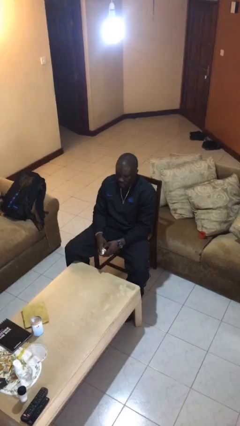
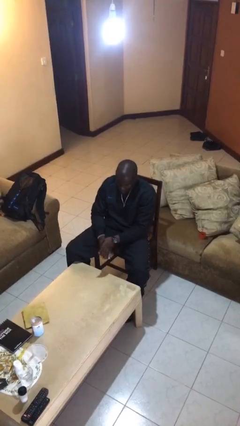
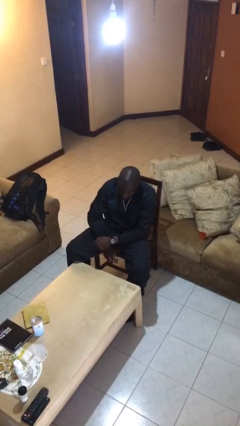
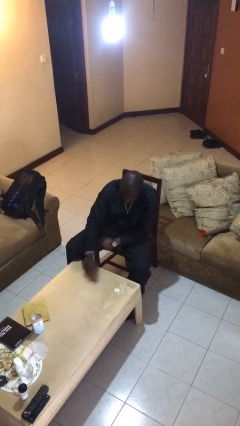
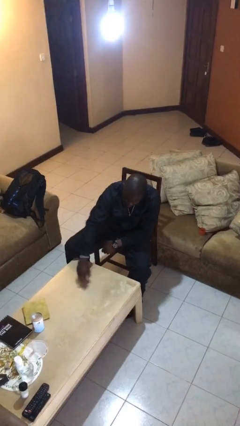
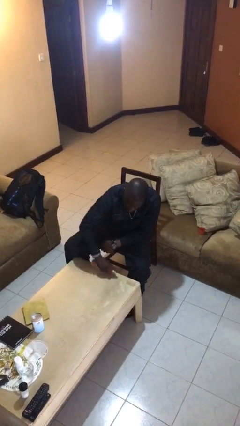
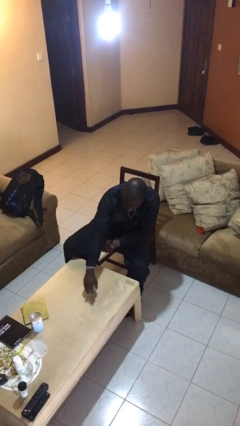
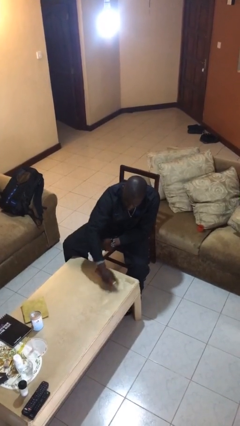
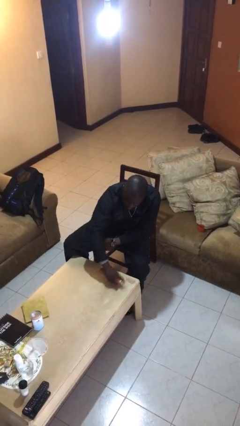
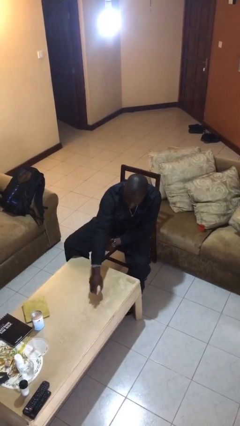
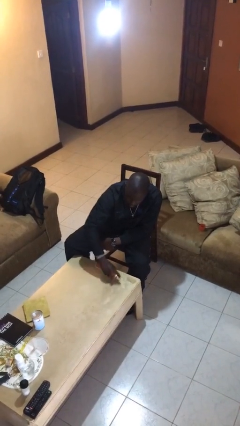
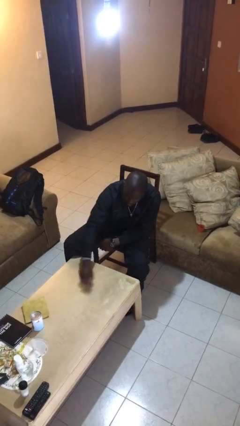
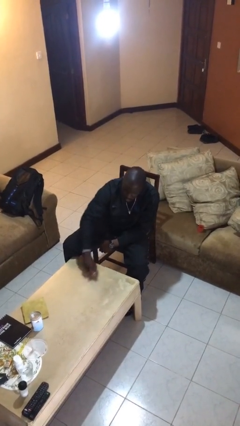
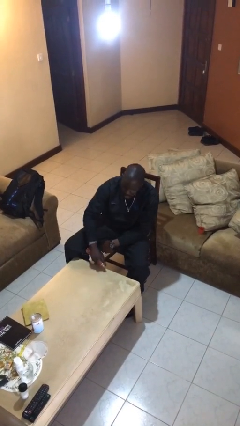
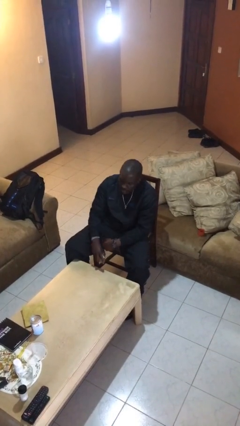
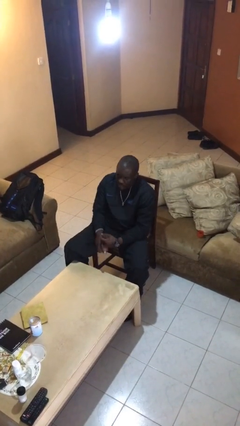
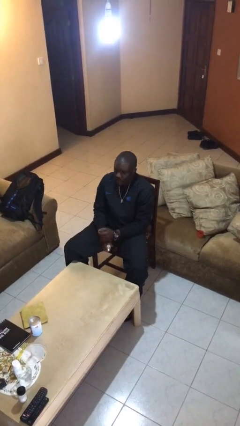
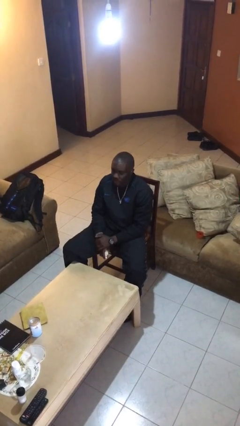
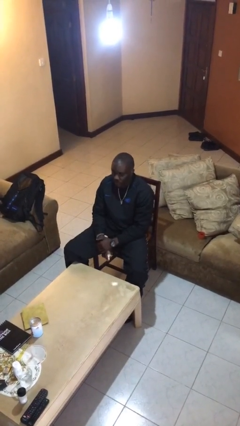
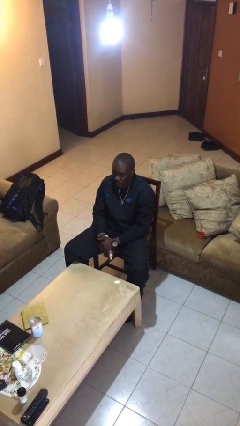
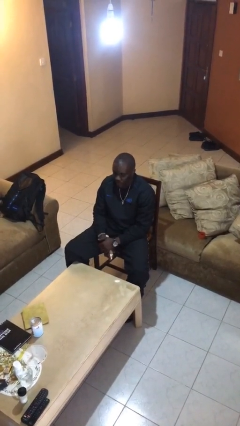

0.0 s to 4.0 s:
person sprays from bottle

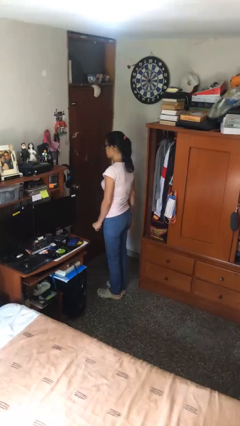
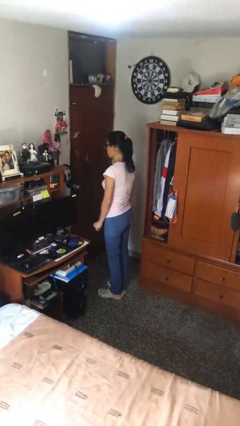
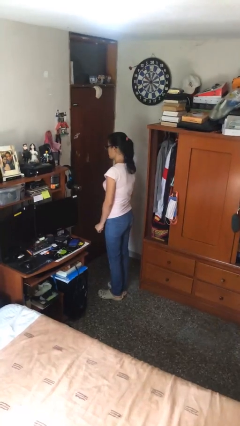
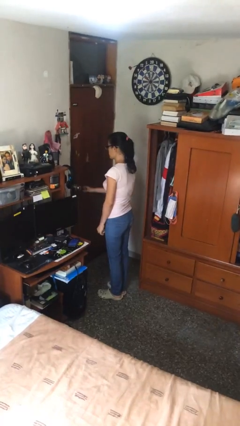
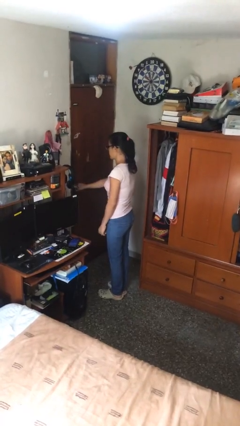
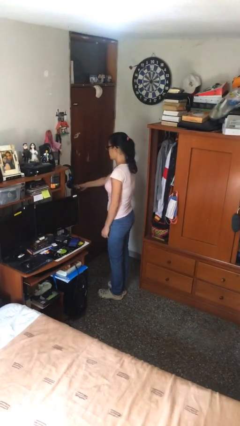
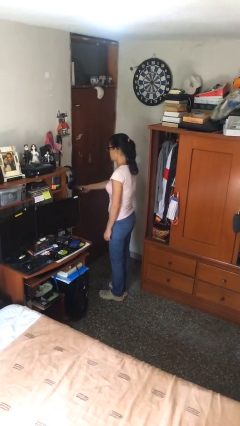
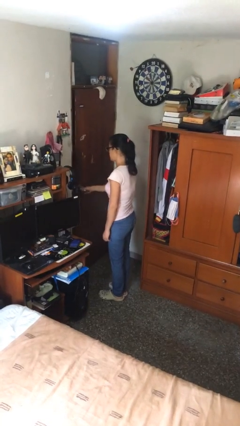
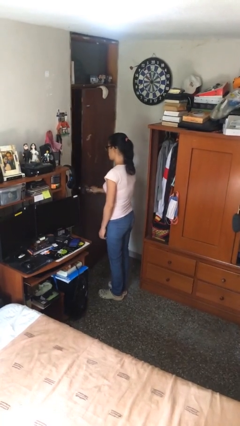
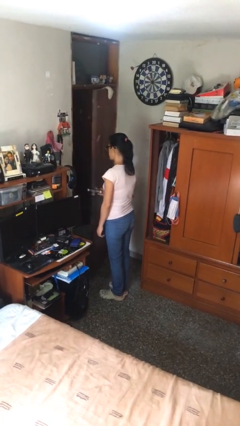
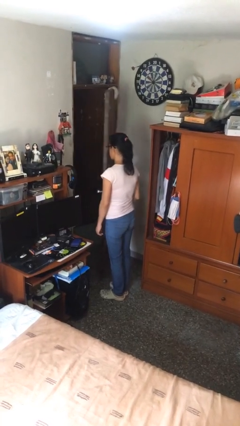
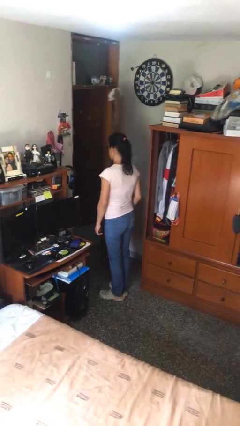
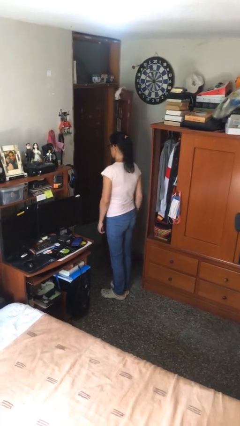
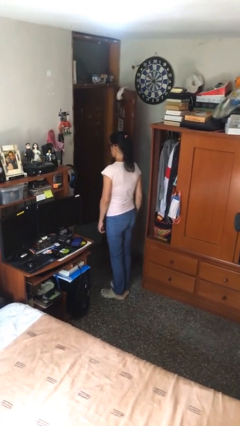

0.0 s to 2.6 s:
person opens facility door

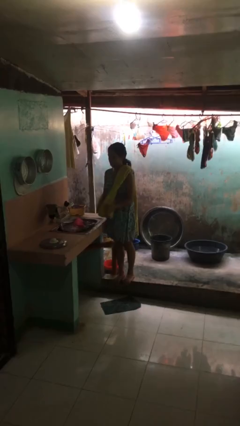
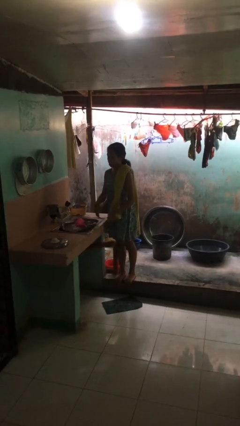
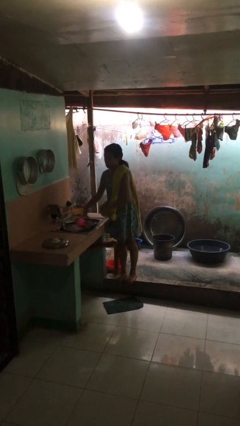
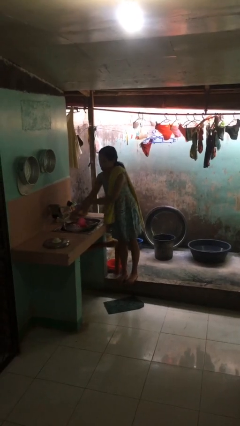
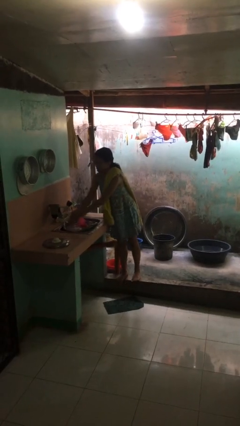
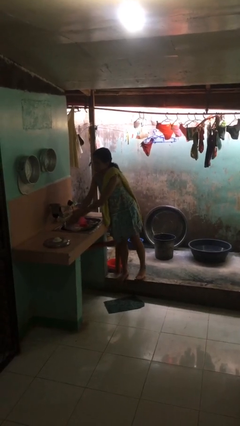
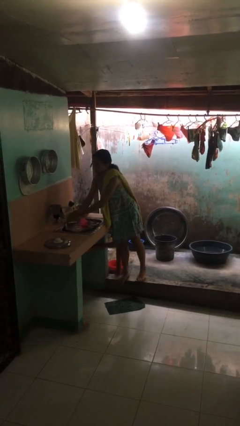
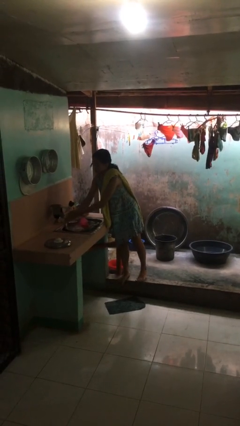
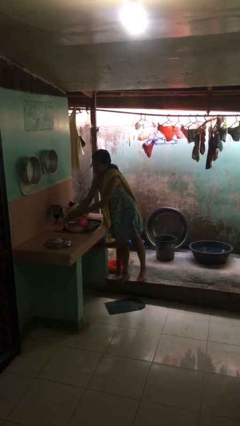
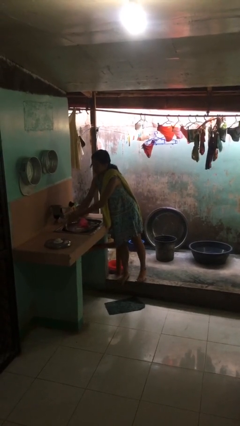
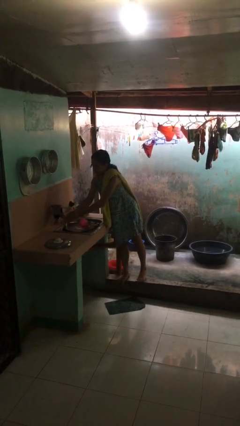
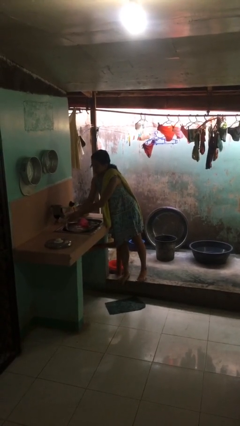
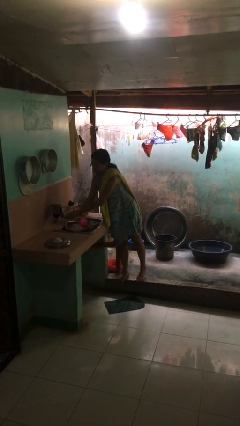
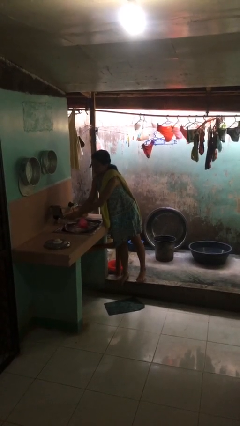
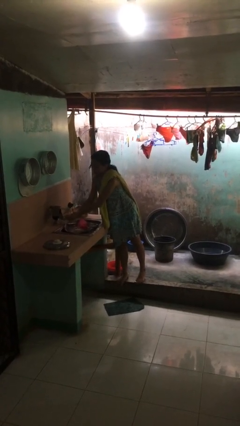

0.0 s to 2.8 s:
person washes hands

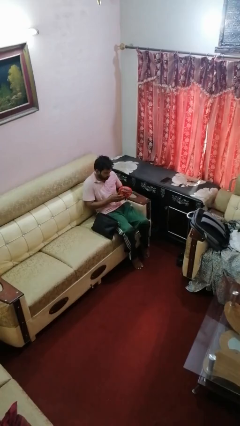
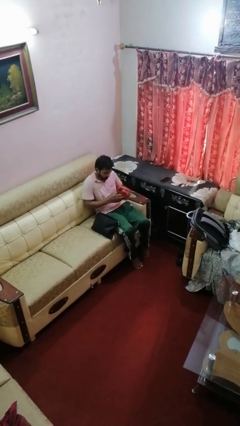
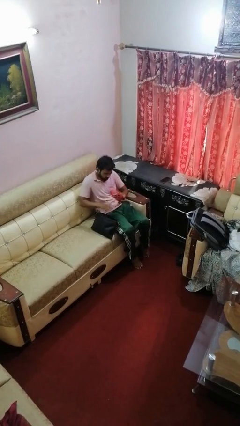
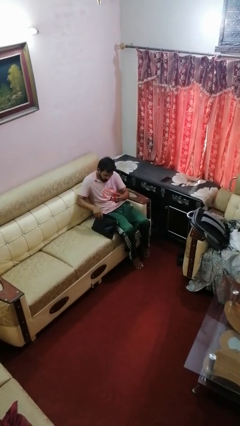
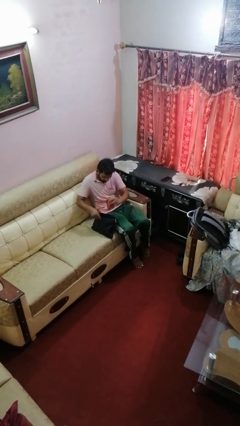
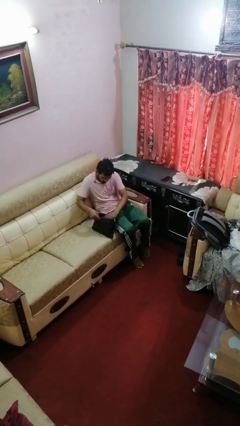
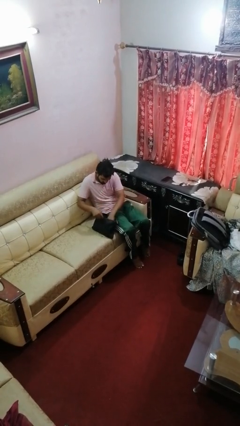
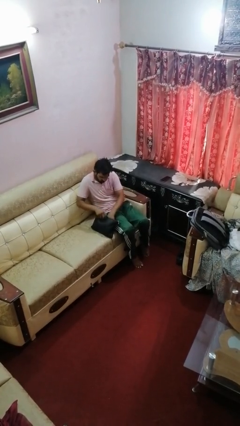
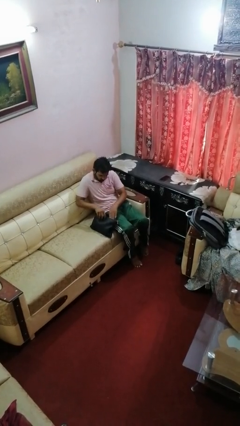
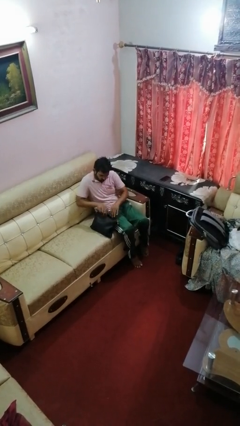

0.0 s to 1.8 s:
person puts object into purse

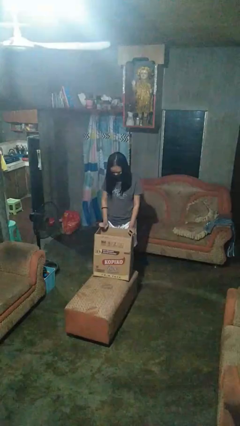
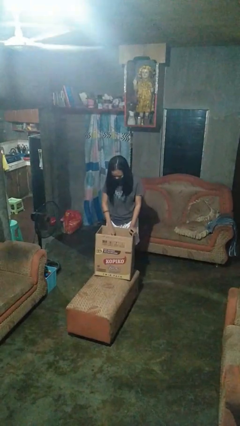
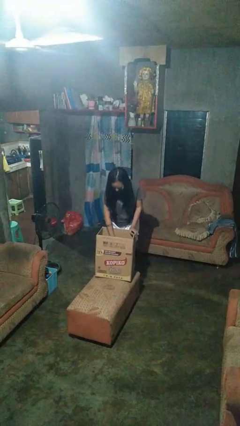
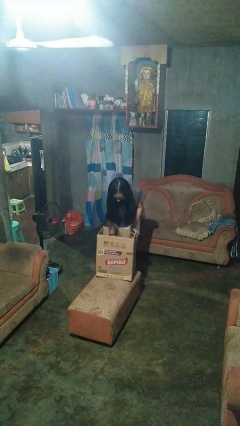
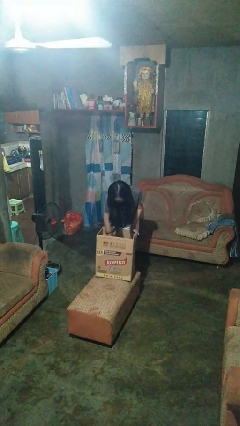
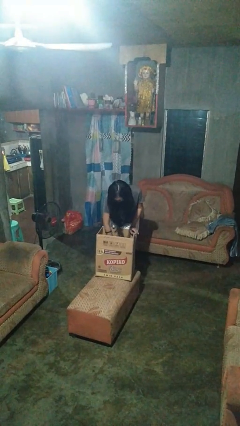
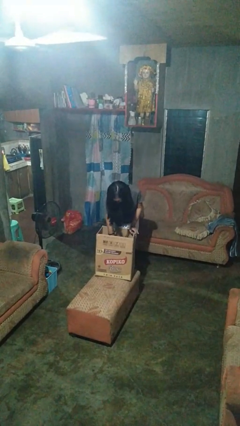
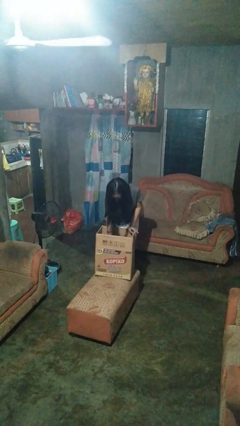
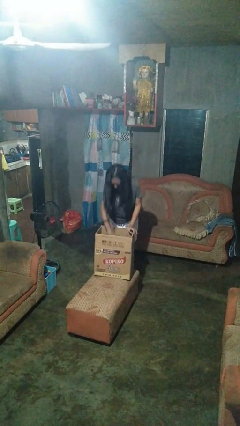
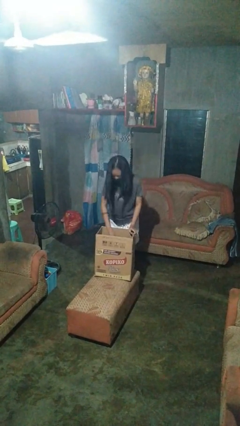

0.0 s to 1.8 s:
person searches in box

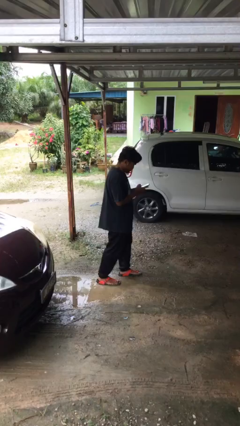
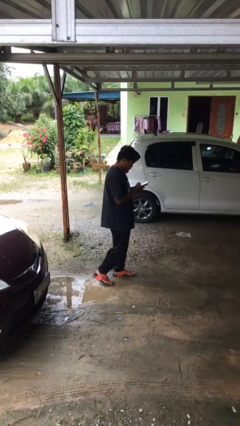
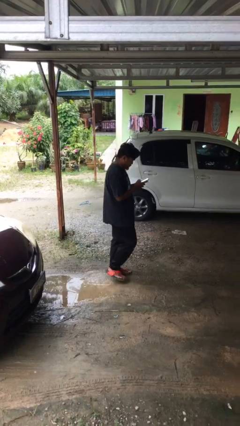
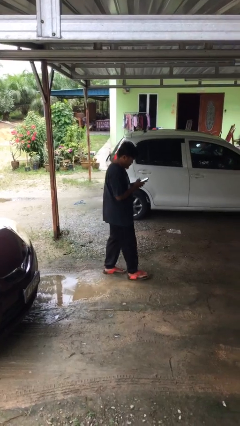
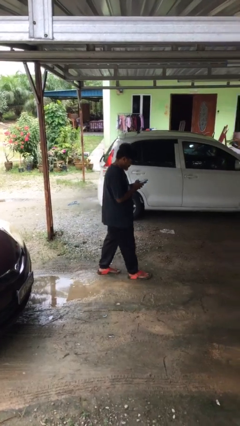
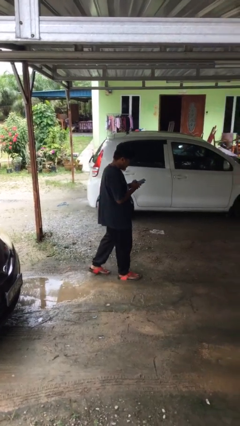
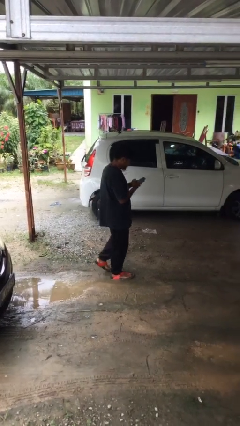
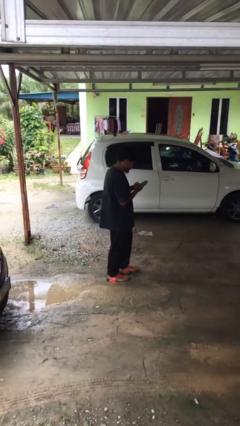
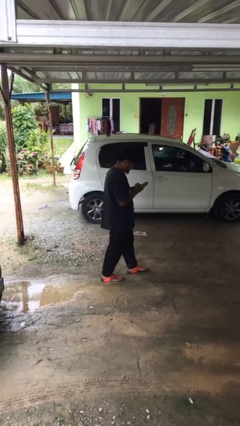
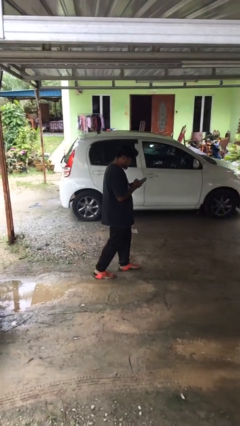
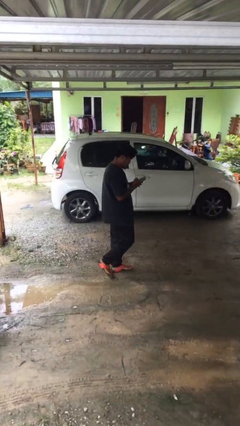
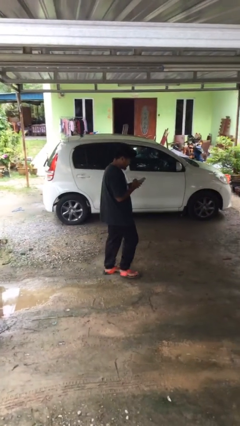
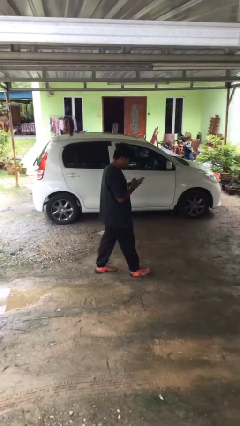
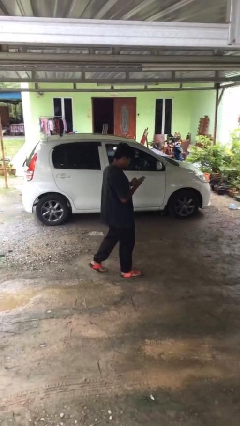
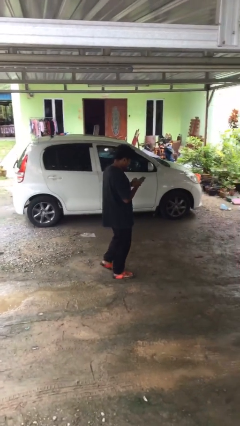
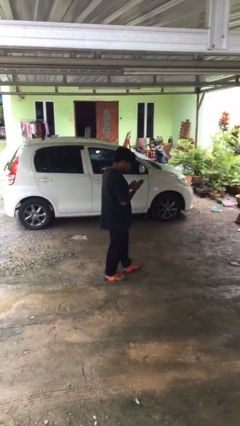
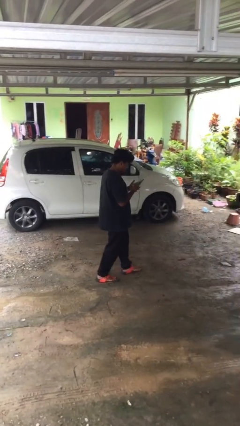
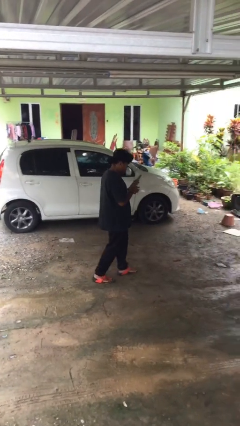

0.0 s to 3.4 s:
person texts on phone

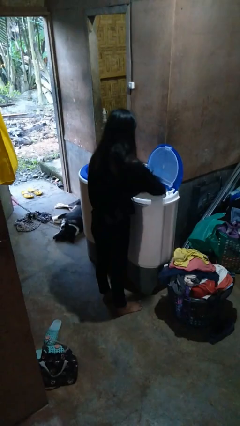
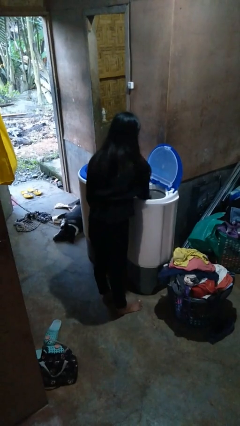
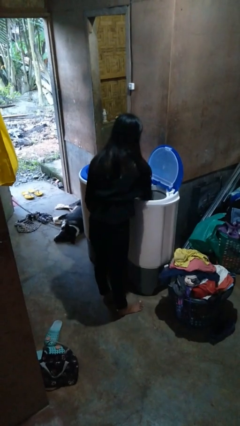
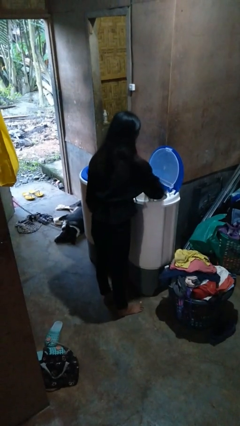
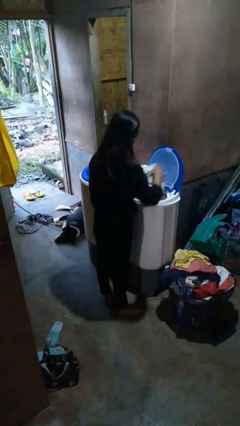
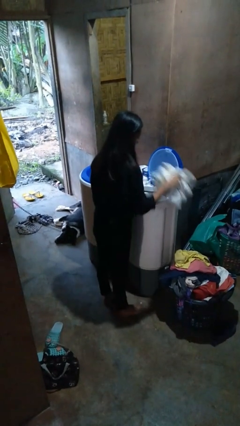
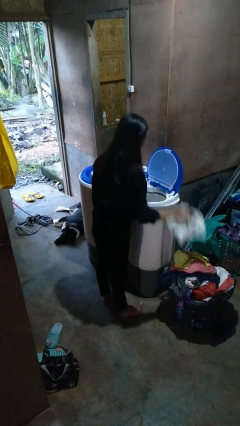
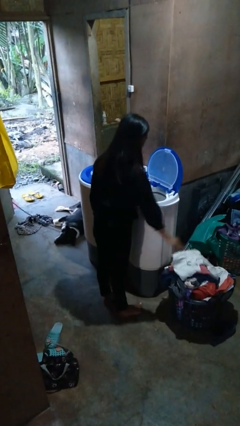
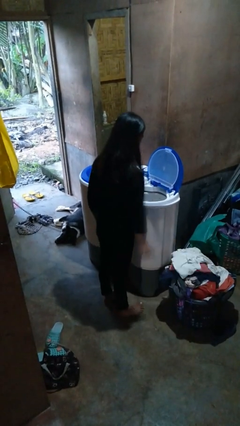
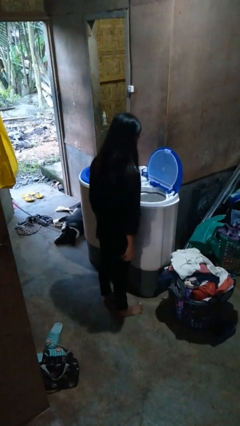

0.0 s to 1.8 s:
person unloads dryer
